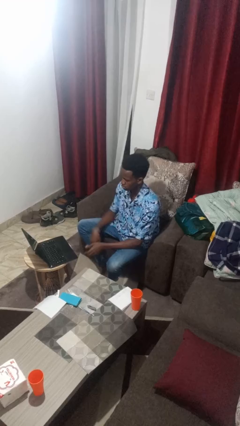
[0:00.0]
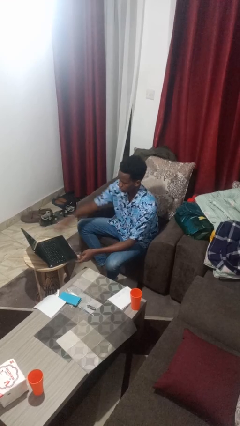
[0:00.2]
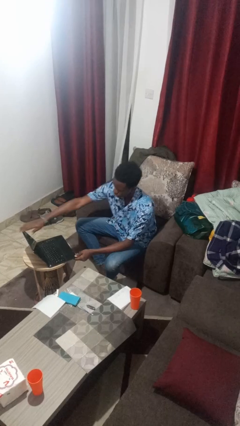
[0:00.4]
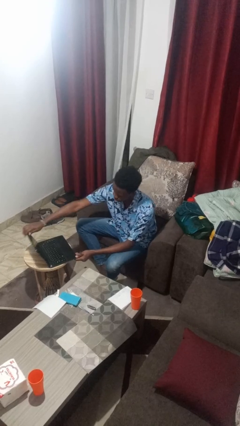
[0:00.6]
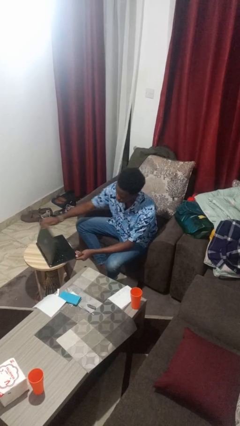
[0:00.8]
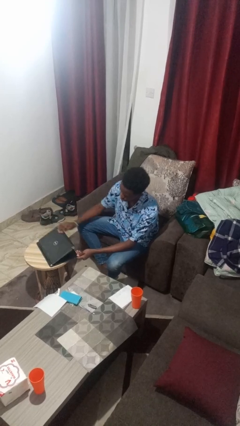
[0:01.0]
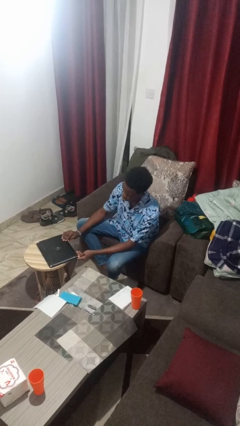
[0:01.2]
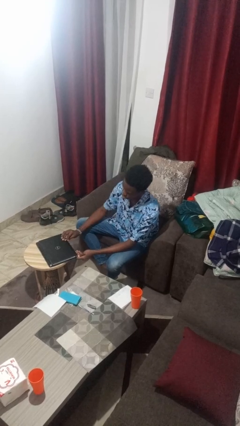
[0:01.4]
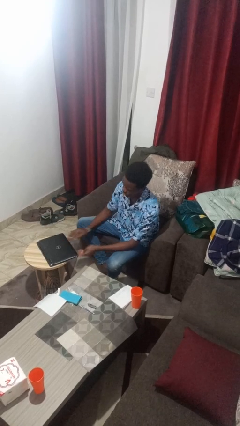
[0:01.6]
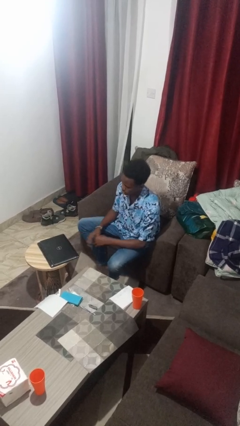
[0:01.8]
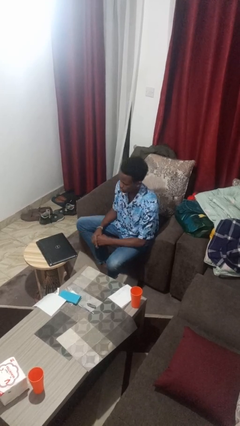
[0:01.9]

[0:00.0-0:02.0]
person closes laptop

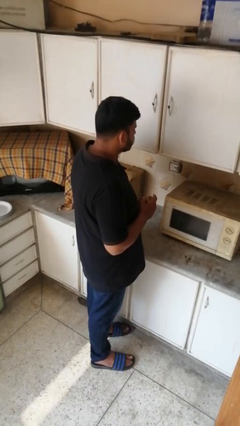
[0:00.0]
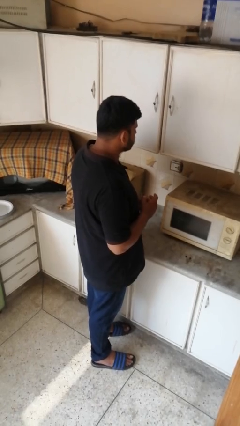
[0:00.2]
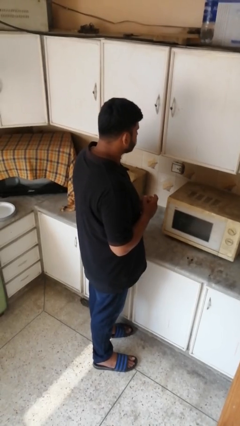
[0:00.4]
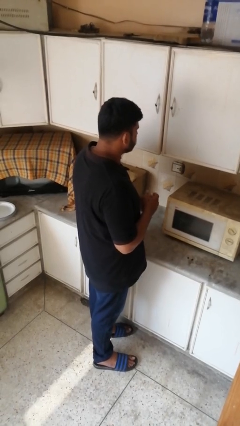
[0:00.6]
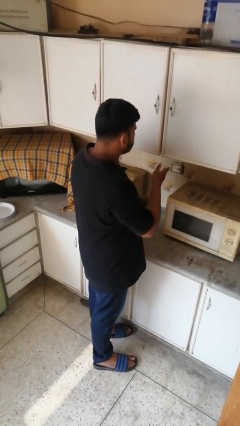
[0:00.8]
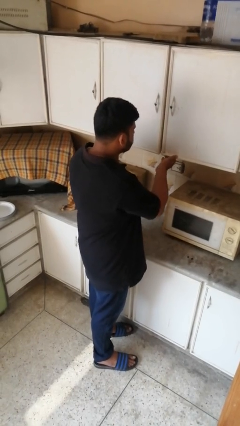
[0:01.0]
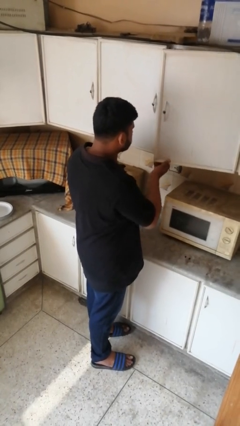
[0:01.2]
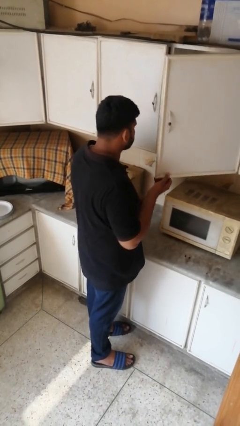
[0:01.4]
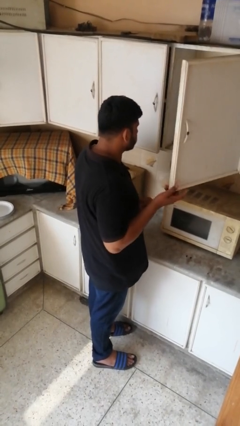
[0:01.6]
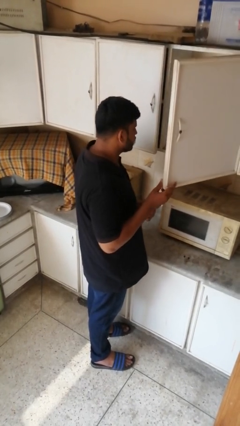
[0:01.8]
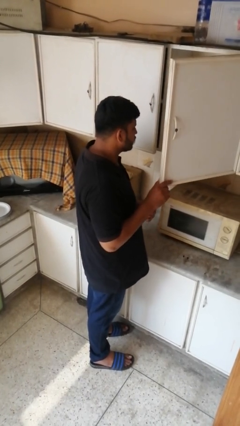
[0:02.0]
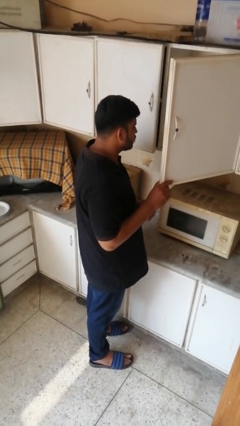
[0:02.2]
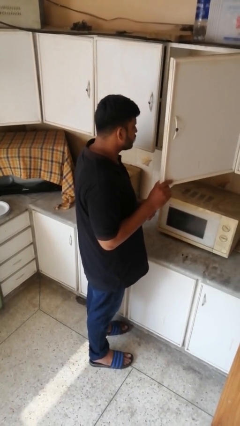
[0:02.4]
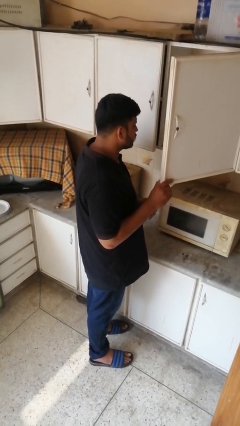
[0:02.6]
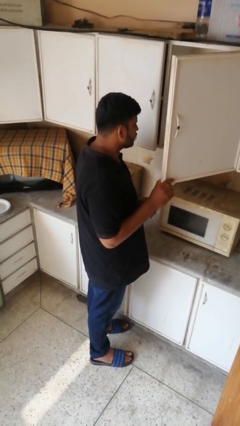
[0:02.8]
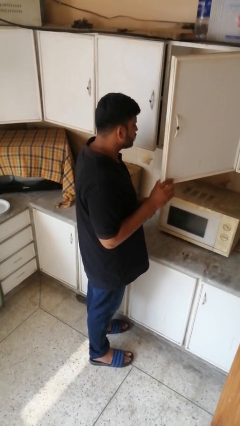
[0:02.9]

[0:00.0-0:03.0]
person opens cabinet

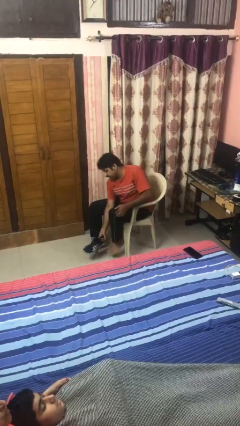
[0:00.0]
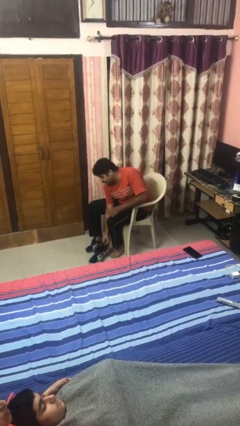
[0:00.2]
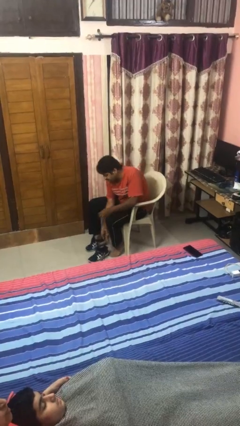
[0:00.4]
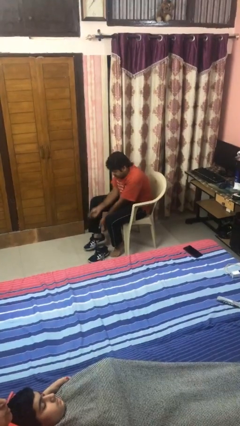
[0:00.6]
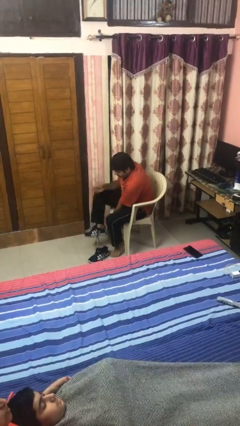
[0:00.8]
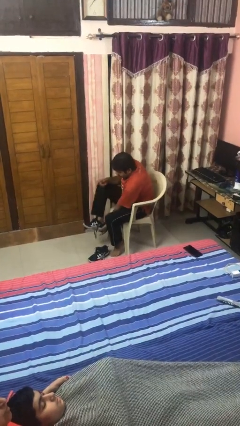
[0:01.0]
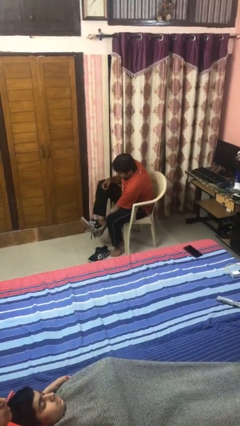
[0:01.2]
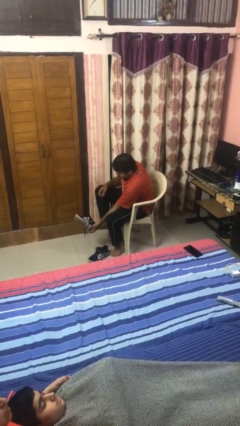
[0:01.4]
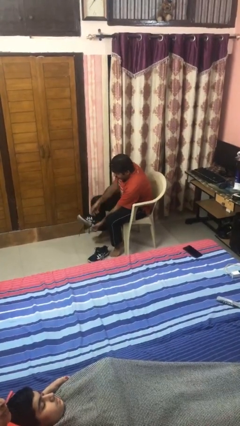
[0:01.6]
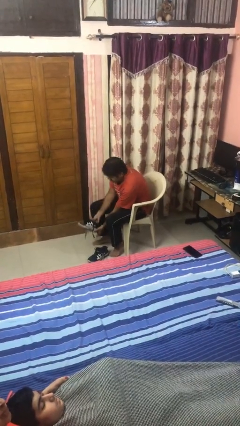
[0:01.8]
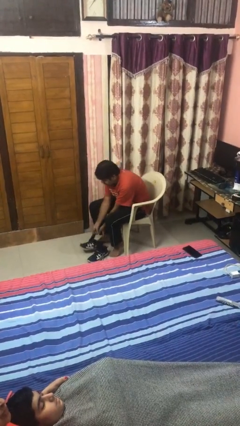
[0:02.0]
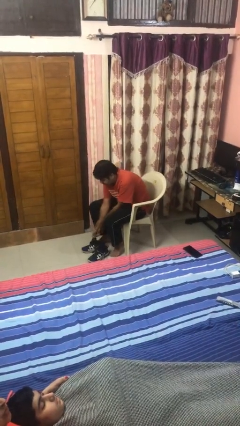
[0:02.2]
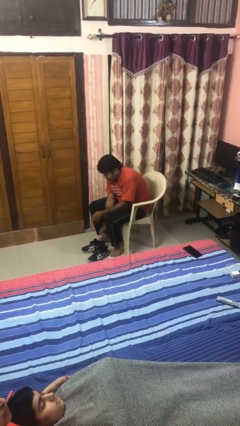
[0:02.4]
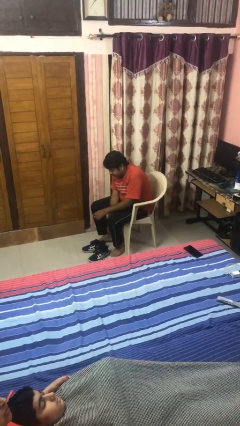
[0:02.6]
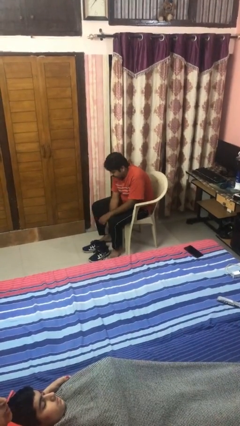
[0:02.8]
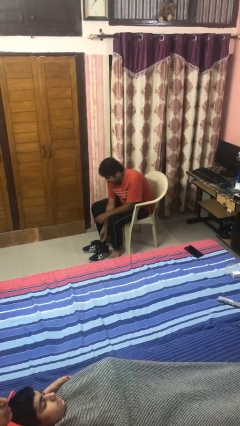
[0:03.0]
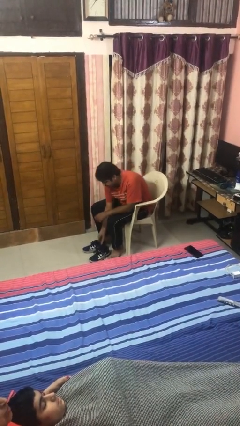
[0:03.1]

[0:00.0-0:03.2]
person takes off boots

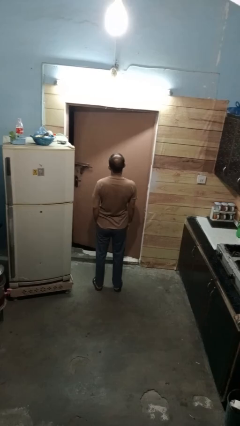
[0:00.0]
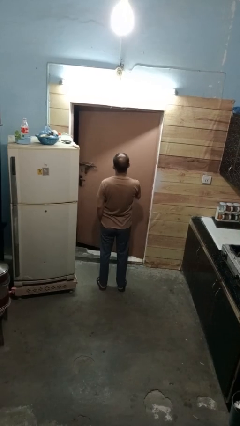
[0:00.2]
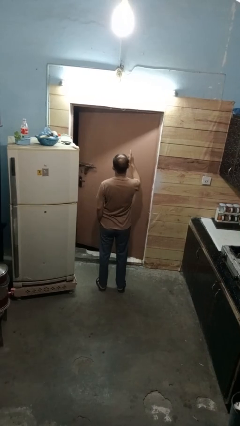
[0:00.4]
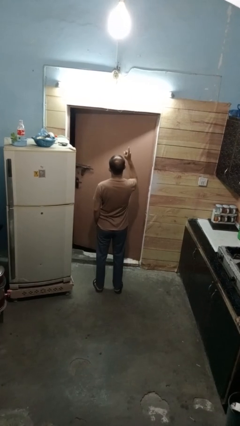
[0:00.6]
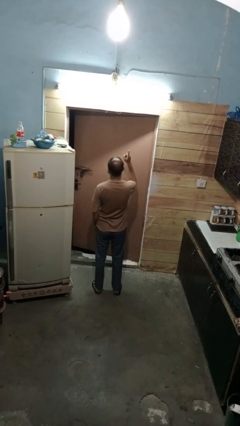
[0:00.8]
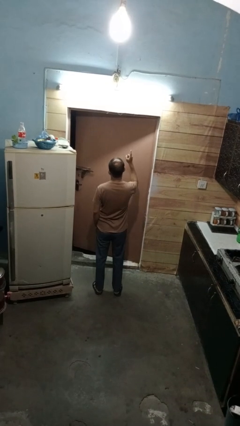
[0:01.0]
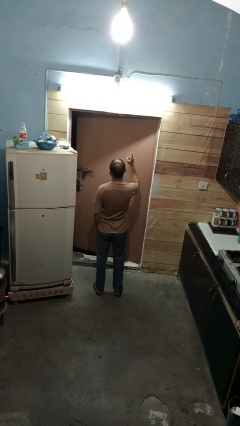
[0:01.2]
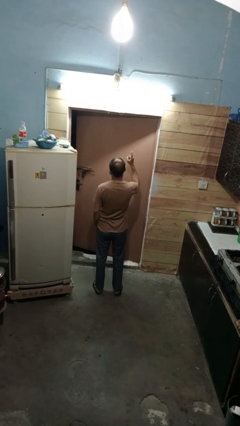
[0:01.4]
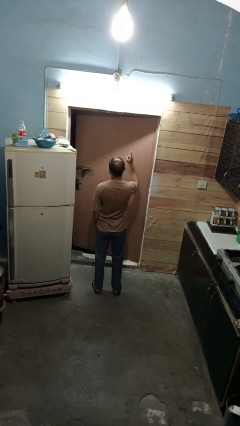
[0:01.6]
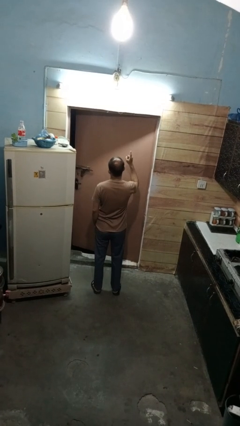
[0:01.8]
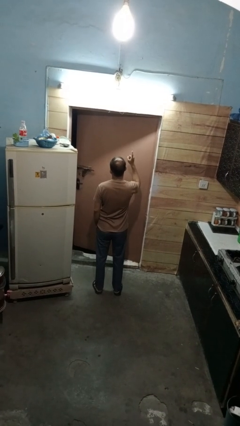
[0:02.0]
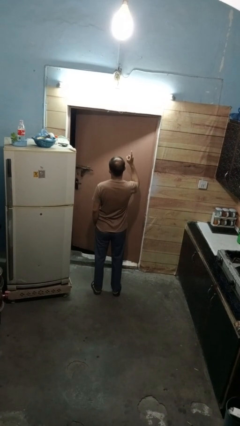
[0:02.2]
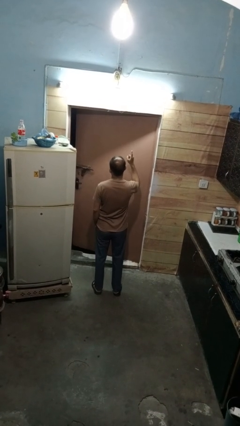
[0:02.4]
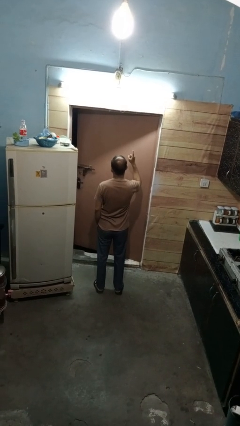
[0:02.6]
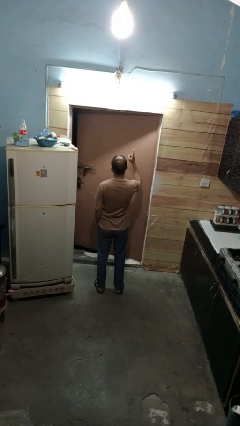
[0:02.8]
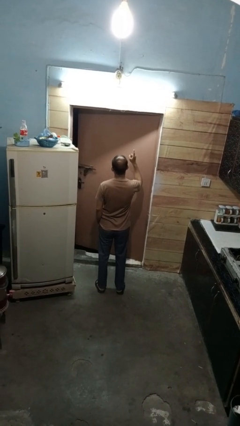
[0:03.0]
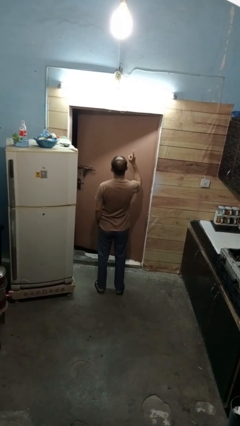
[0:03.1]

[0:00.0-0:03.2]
person gestures number one

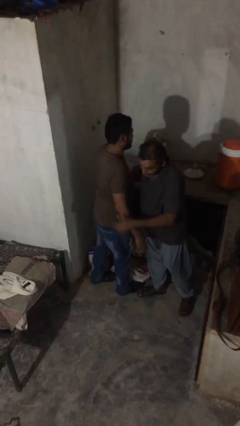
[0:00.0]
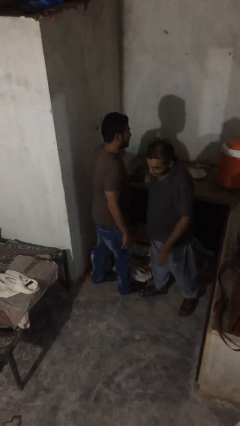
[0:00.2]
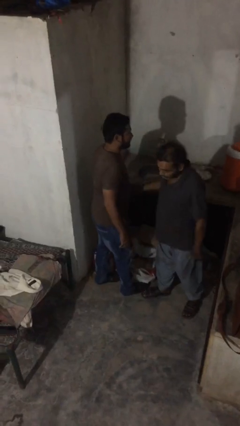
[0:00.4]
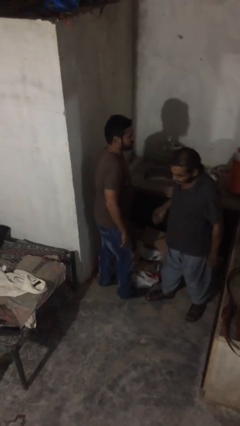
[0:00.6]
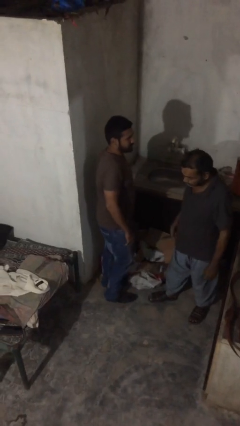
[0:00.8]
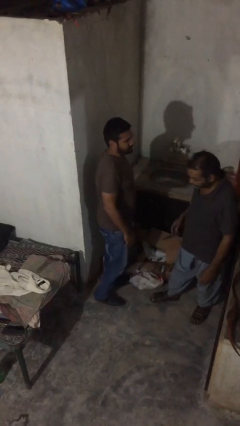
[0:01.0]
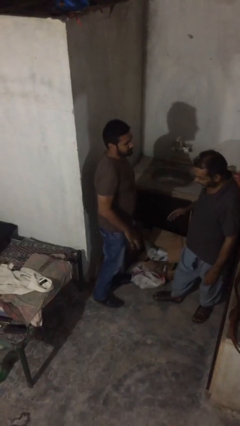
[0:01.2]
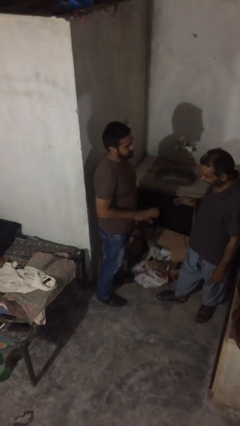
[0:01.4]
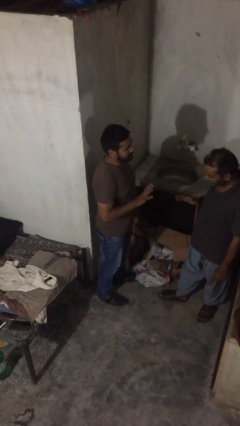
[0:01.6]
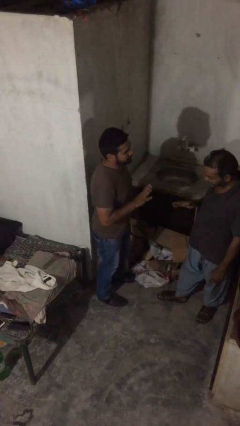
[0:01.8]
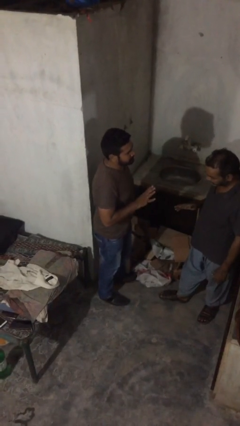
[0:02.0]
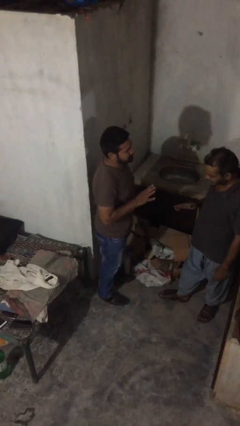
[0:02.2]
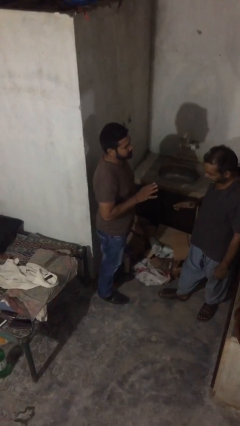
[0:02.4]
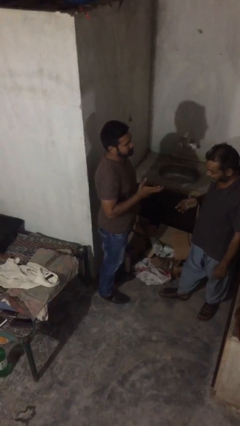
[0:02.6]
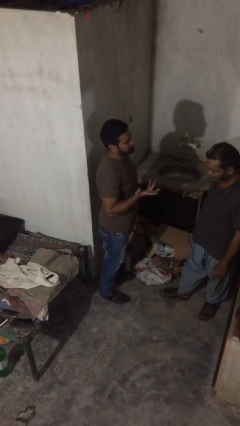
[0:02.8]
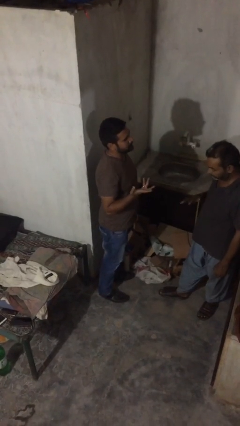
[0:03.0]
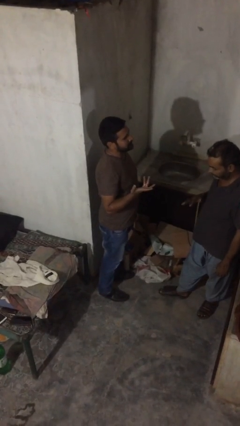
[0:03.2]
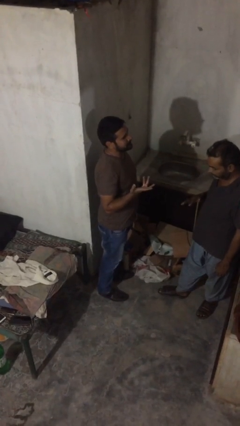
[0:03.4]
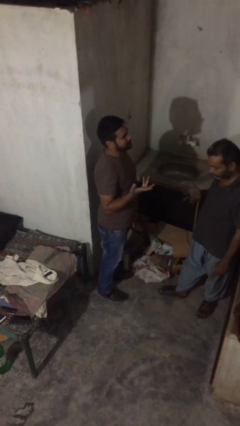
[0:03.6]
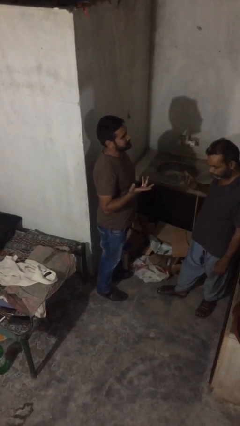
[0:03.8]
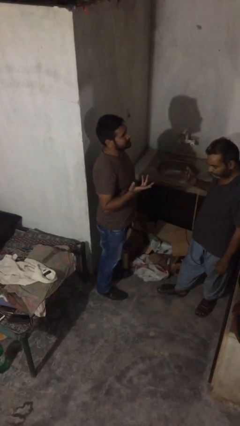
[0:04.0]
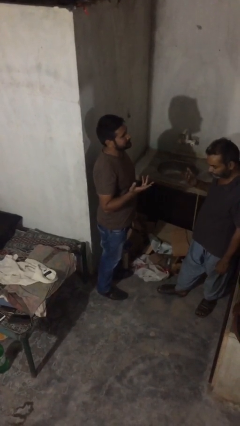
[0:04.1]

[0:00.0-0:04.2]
person talks to person

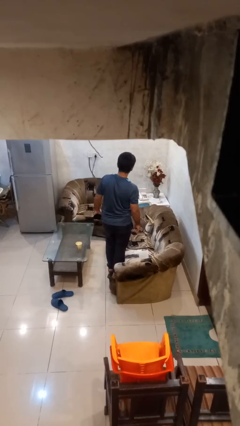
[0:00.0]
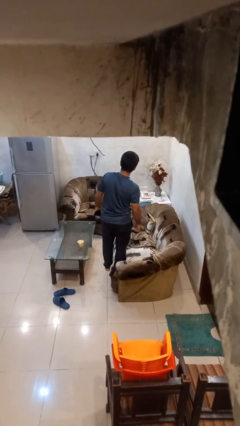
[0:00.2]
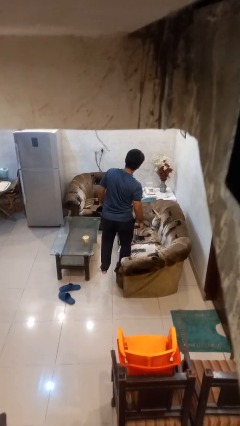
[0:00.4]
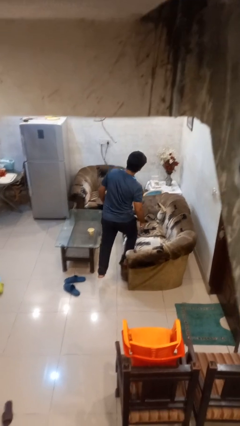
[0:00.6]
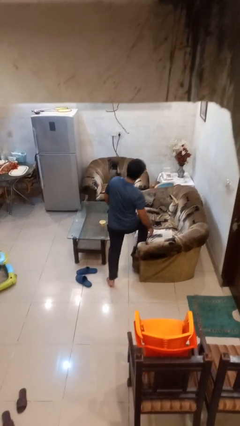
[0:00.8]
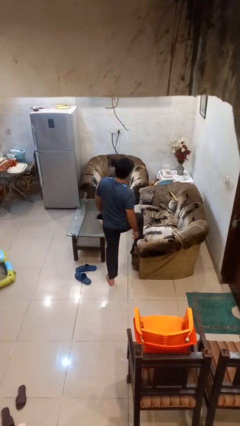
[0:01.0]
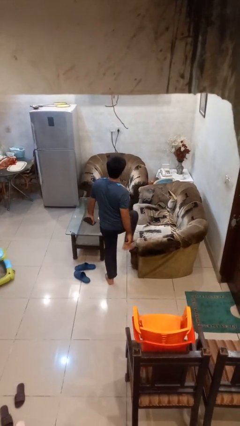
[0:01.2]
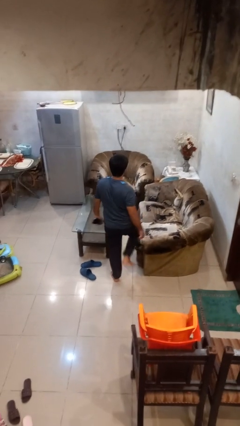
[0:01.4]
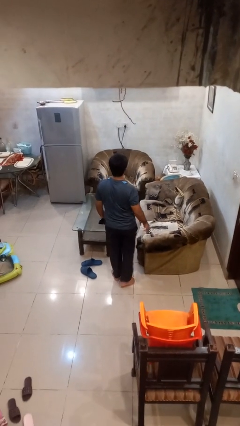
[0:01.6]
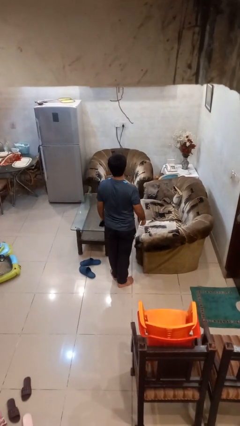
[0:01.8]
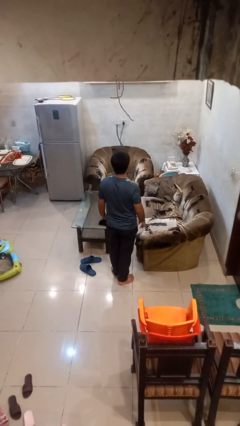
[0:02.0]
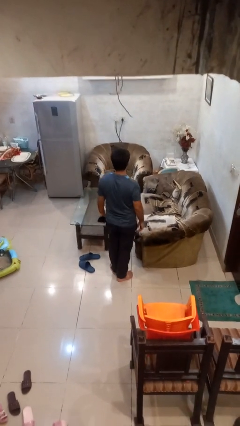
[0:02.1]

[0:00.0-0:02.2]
person climbs off couch
